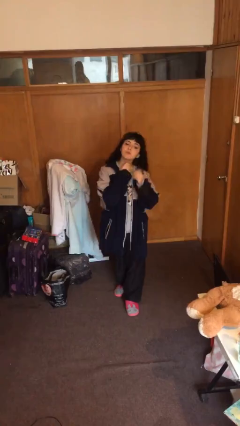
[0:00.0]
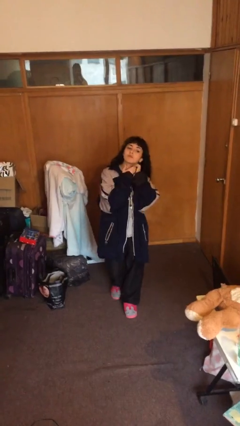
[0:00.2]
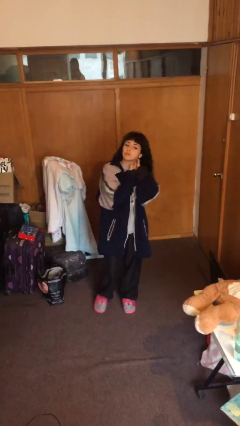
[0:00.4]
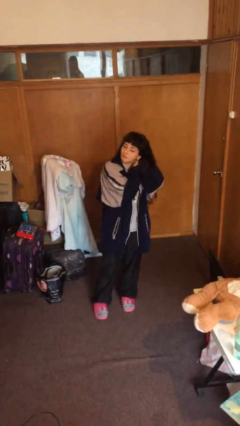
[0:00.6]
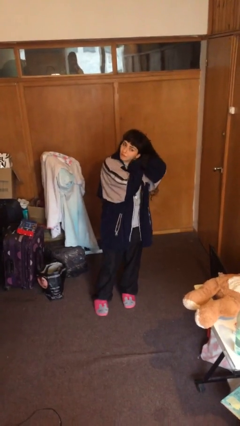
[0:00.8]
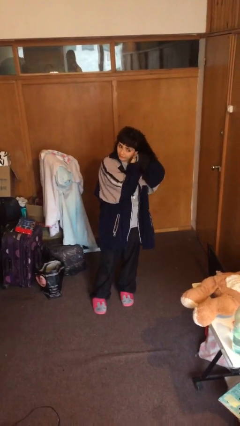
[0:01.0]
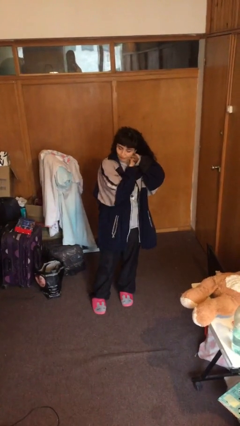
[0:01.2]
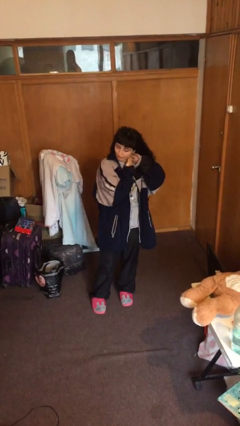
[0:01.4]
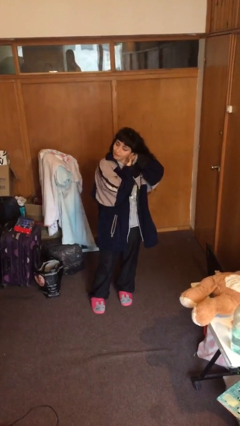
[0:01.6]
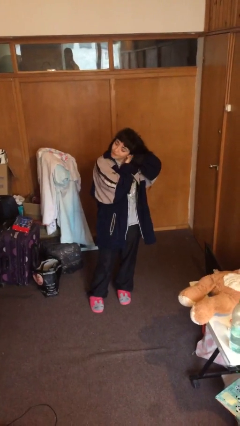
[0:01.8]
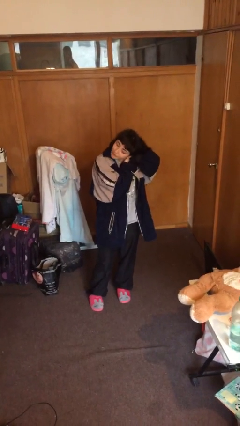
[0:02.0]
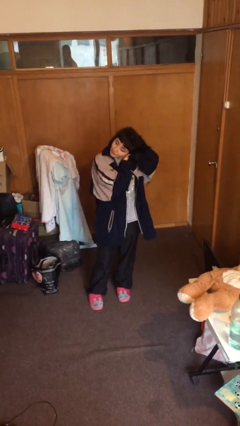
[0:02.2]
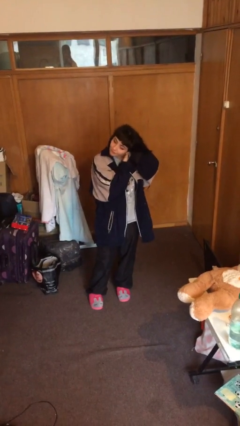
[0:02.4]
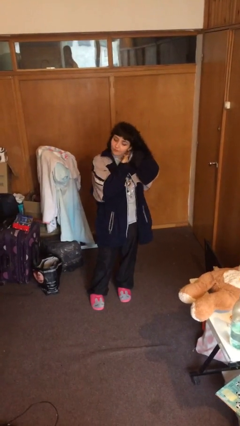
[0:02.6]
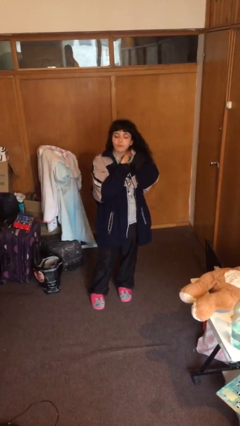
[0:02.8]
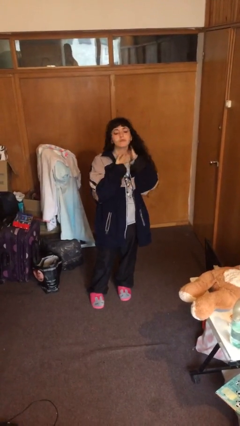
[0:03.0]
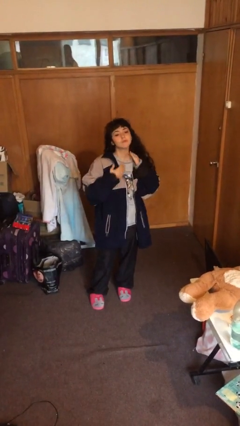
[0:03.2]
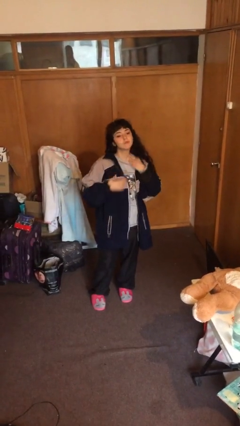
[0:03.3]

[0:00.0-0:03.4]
person rubs neck

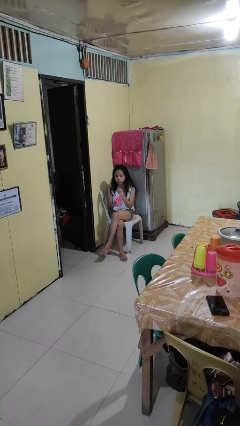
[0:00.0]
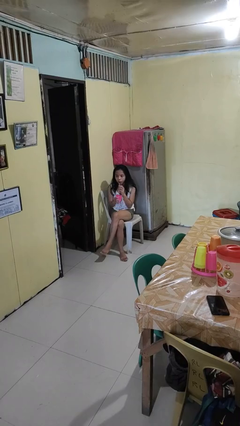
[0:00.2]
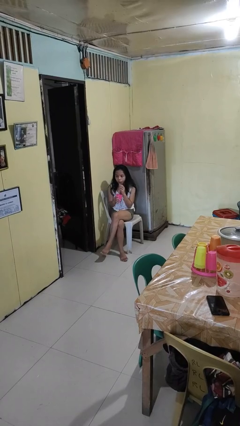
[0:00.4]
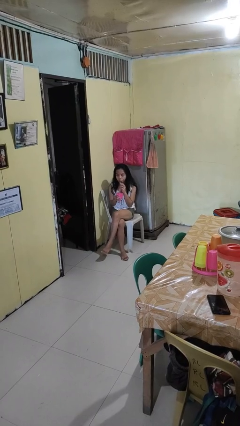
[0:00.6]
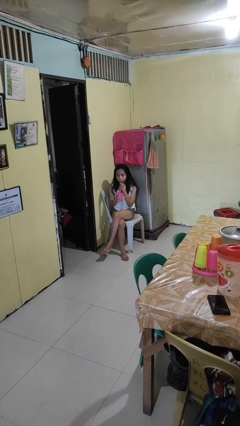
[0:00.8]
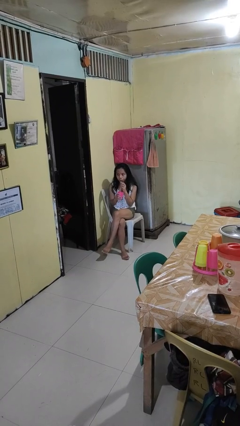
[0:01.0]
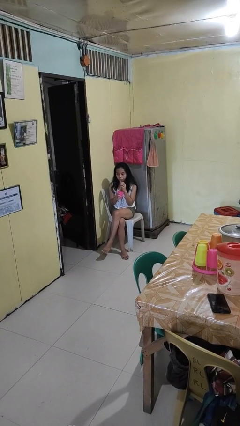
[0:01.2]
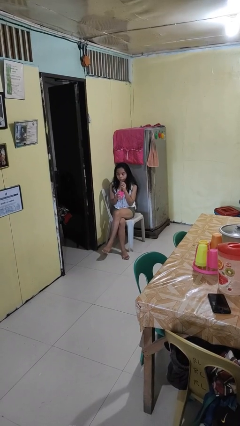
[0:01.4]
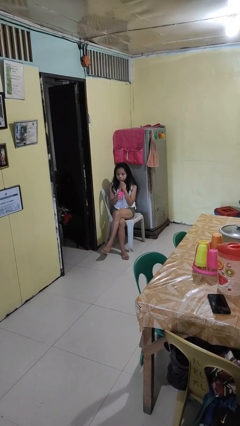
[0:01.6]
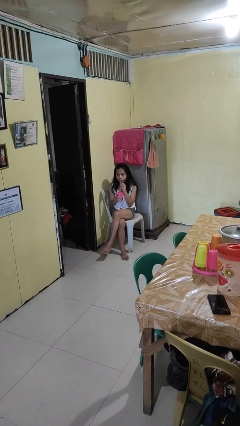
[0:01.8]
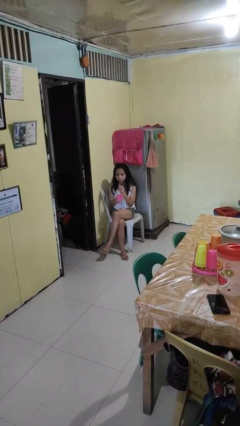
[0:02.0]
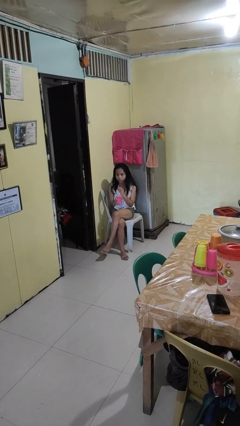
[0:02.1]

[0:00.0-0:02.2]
person drinks from straw

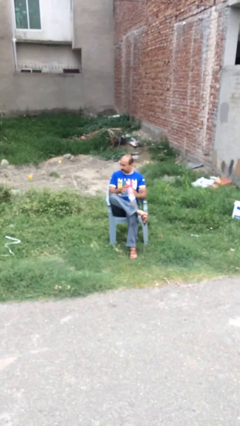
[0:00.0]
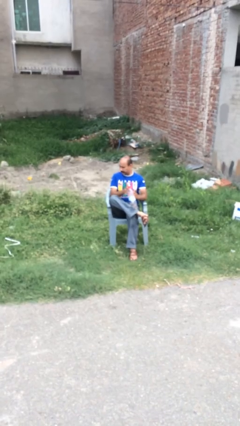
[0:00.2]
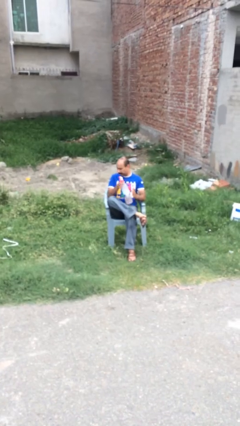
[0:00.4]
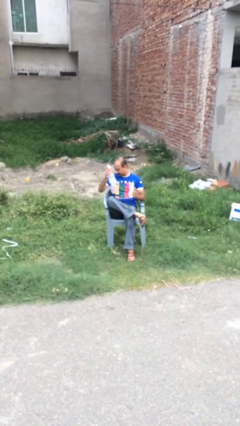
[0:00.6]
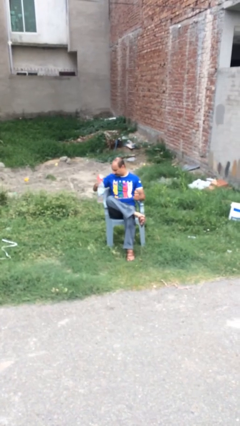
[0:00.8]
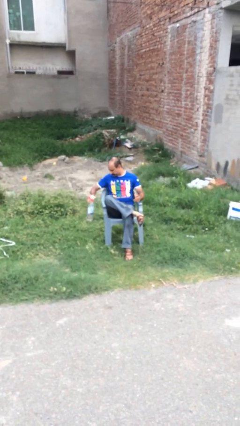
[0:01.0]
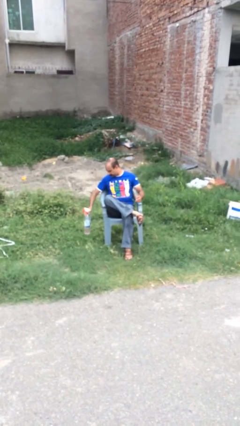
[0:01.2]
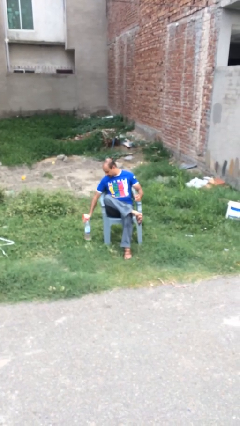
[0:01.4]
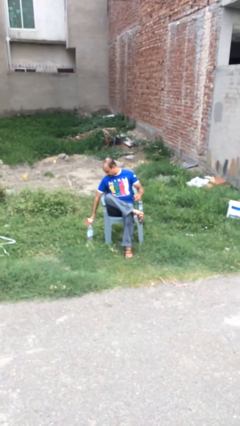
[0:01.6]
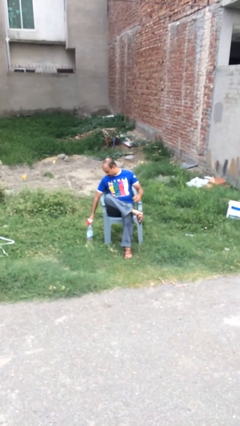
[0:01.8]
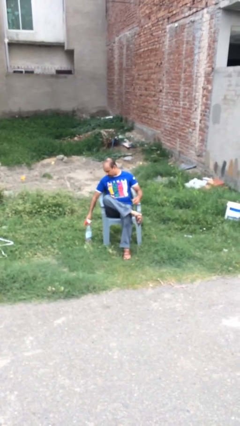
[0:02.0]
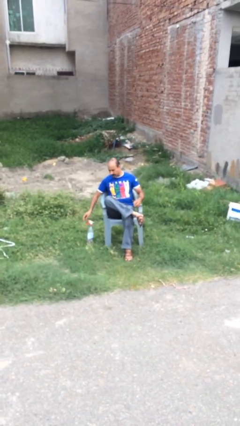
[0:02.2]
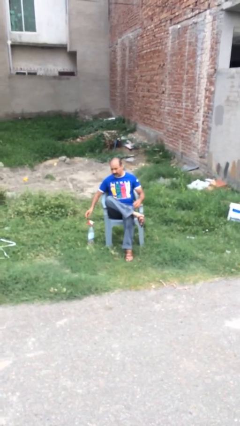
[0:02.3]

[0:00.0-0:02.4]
person puts down object on floor

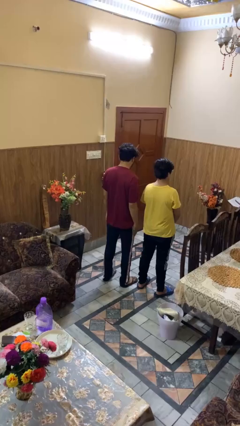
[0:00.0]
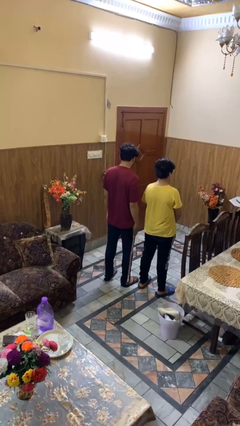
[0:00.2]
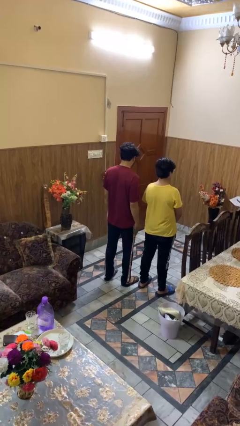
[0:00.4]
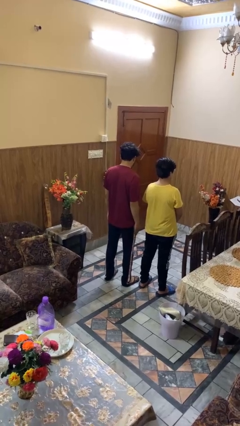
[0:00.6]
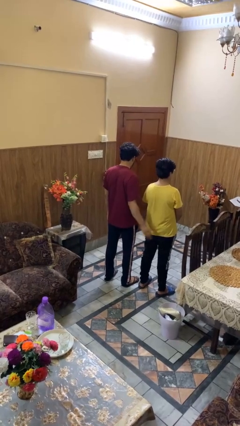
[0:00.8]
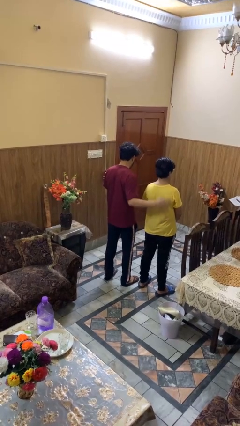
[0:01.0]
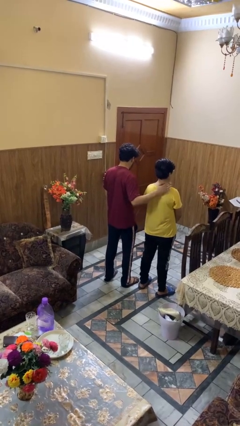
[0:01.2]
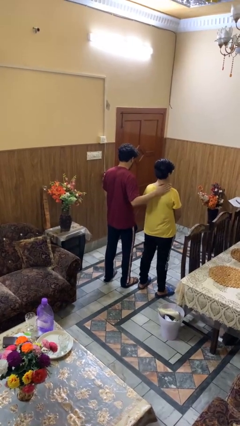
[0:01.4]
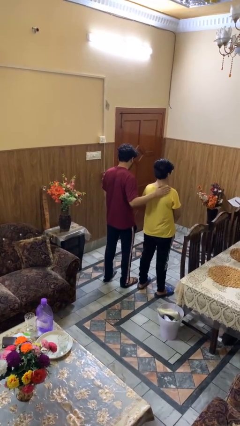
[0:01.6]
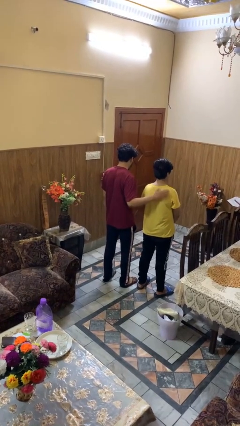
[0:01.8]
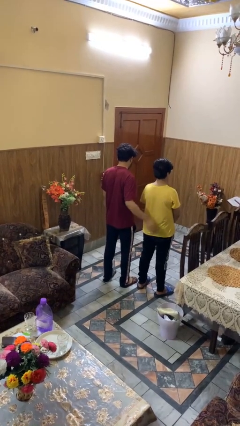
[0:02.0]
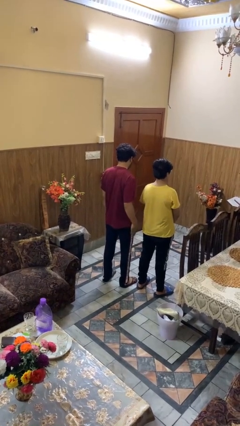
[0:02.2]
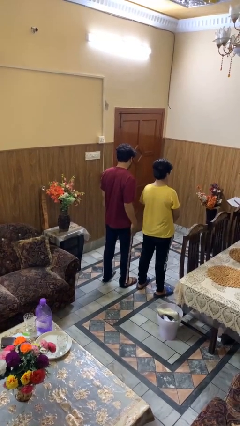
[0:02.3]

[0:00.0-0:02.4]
person touches back of person

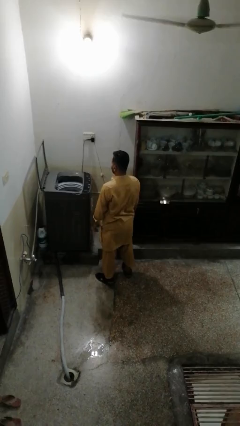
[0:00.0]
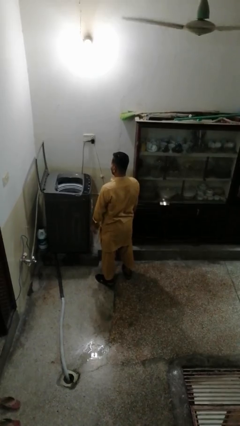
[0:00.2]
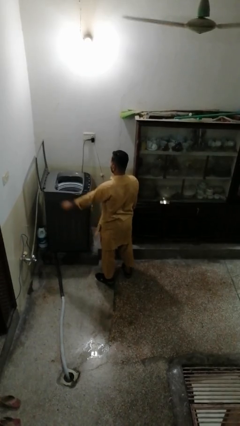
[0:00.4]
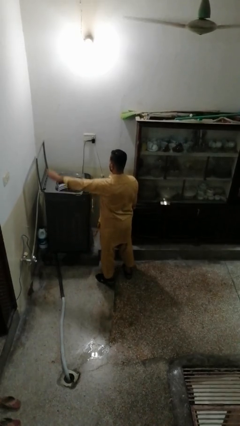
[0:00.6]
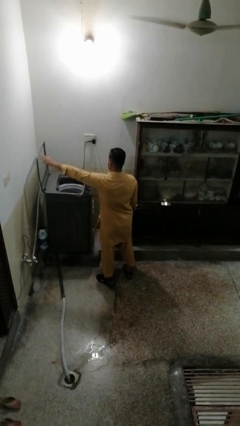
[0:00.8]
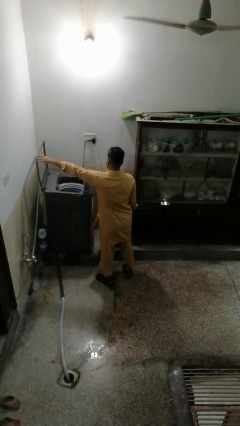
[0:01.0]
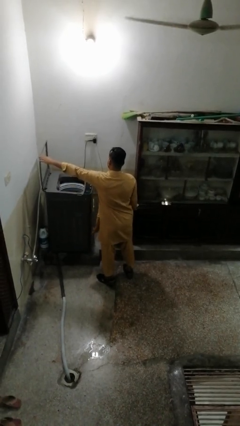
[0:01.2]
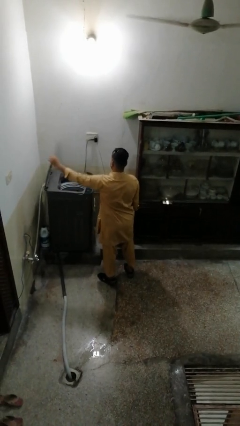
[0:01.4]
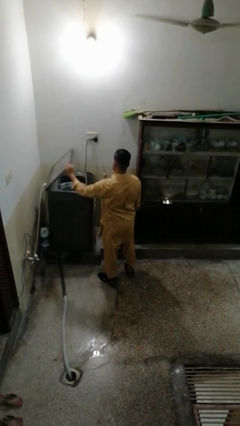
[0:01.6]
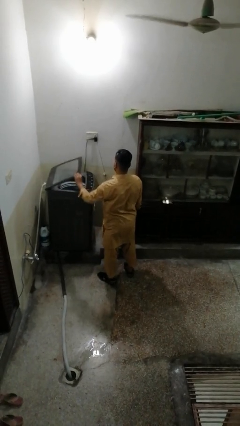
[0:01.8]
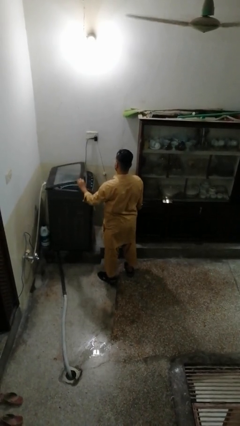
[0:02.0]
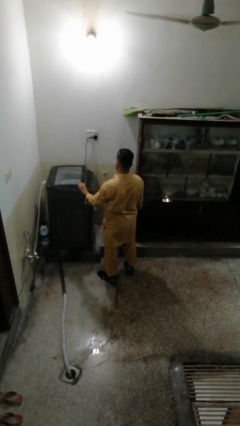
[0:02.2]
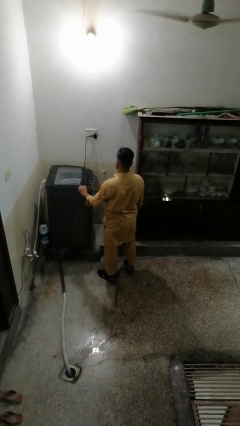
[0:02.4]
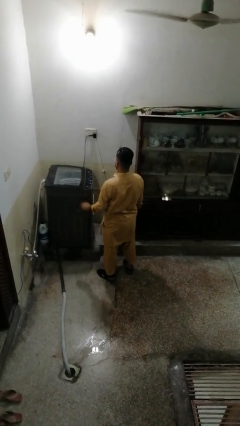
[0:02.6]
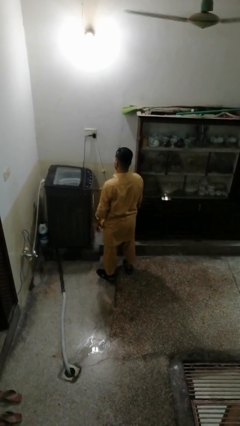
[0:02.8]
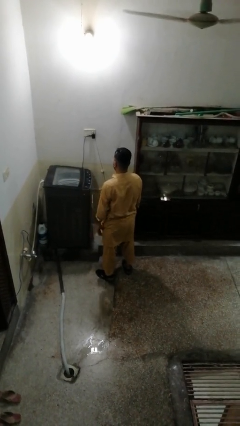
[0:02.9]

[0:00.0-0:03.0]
person closes clothes washer

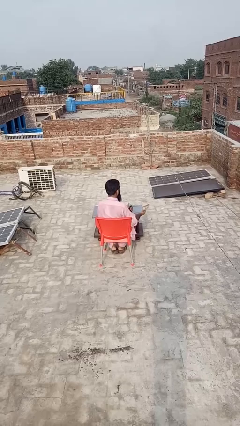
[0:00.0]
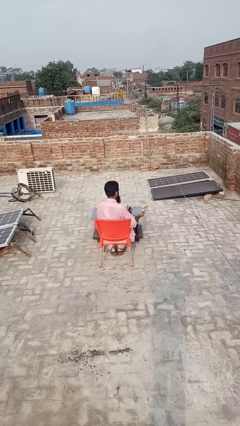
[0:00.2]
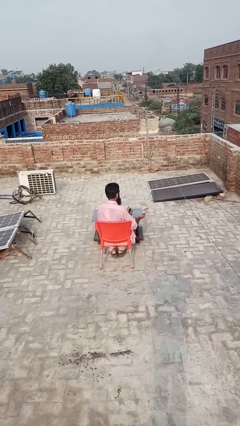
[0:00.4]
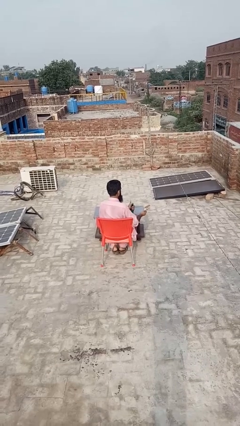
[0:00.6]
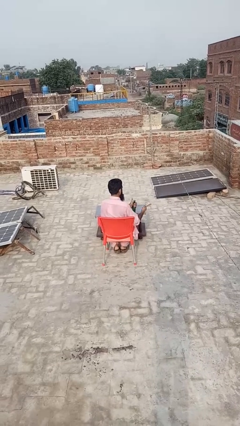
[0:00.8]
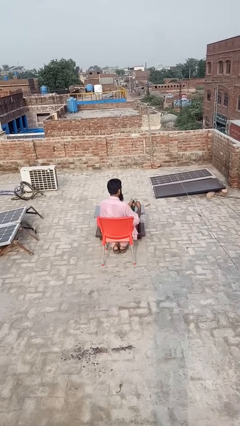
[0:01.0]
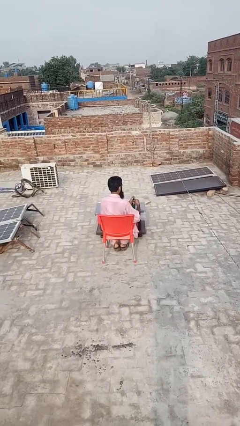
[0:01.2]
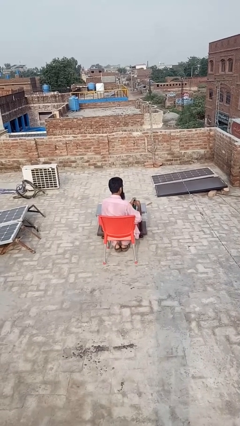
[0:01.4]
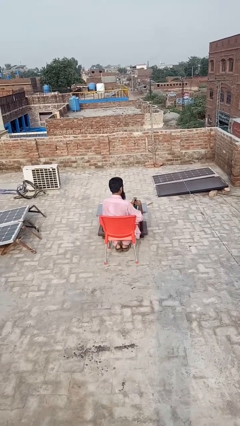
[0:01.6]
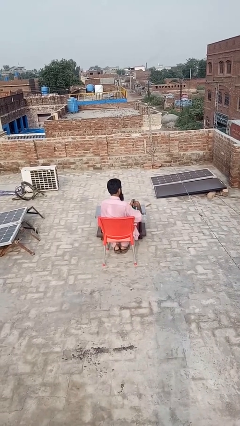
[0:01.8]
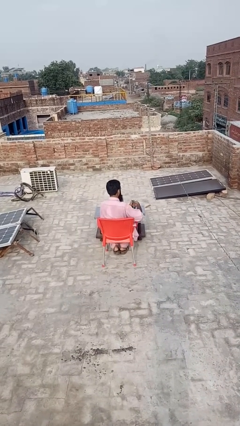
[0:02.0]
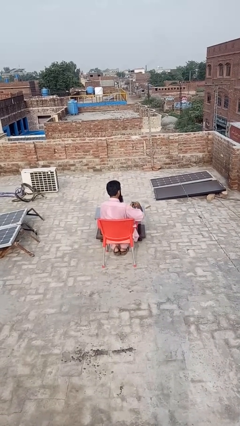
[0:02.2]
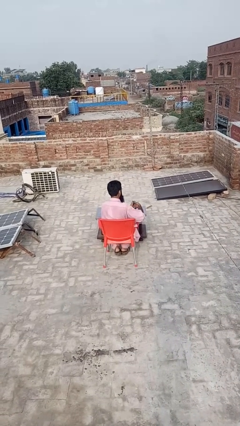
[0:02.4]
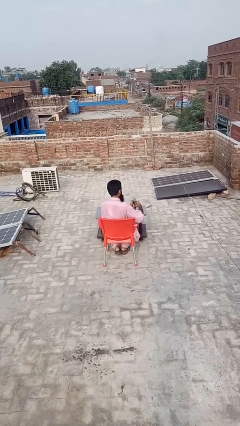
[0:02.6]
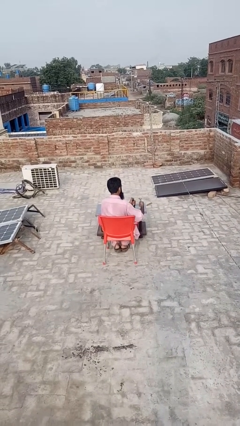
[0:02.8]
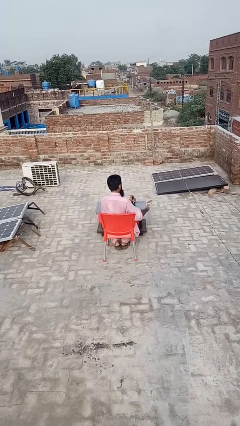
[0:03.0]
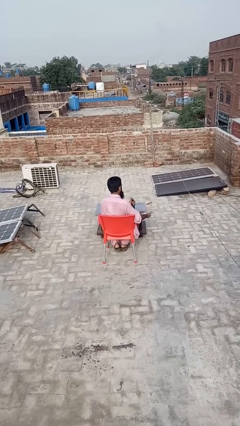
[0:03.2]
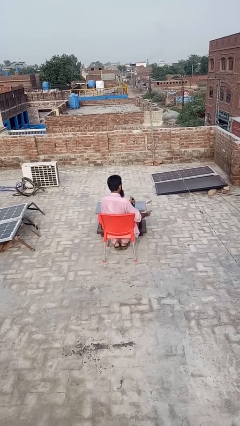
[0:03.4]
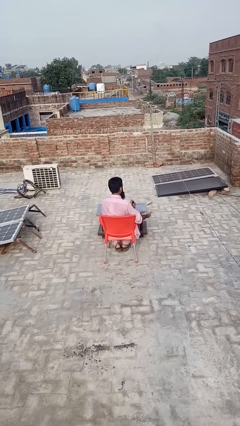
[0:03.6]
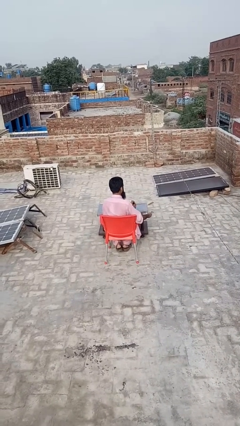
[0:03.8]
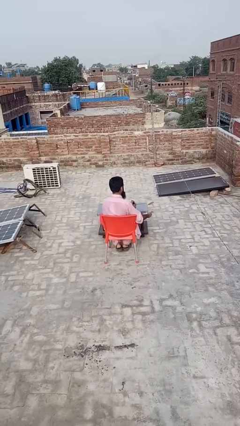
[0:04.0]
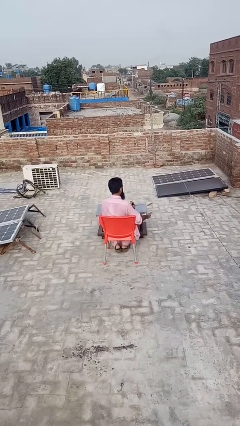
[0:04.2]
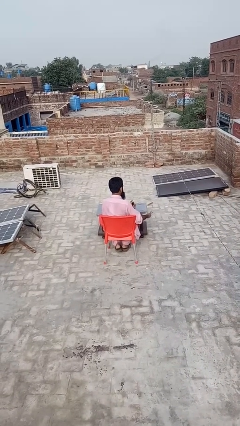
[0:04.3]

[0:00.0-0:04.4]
person opens can with can opener
